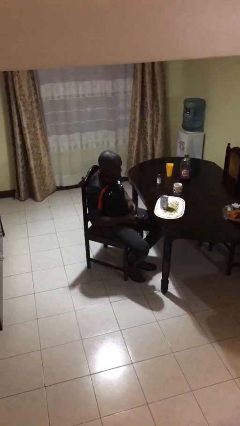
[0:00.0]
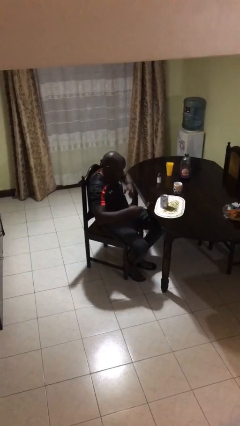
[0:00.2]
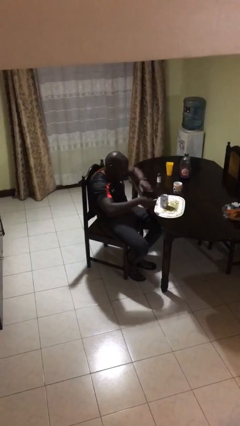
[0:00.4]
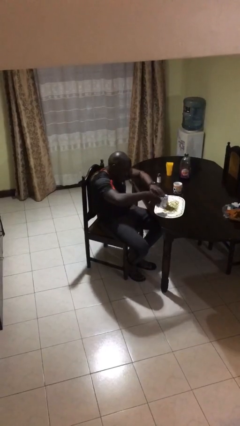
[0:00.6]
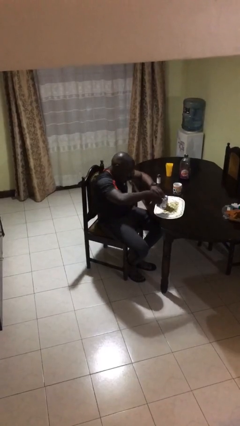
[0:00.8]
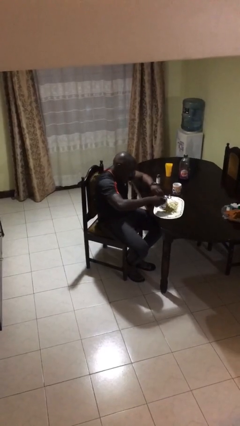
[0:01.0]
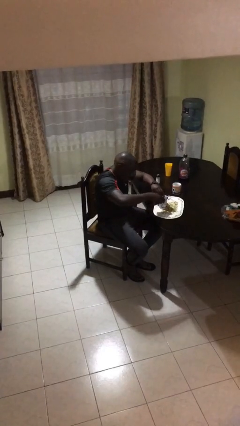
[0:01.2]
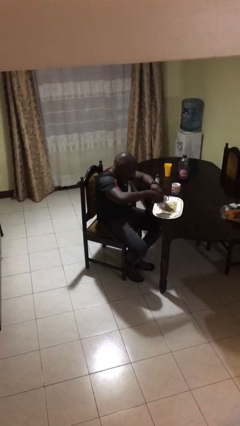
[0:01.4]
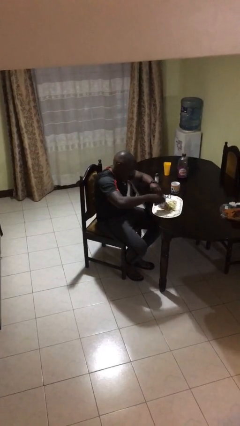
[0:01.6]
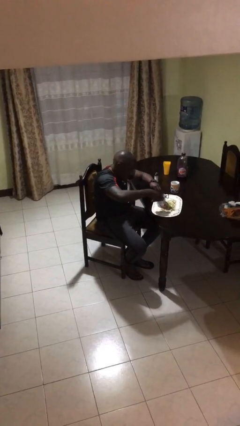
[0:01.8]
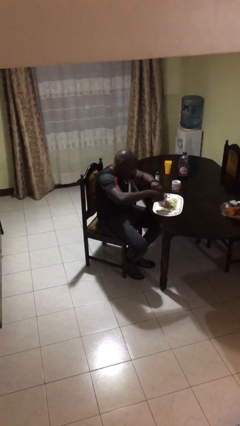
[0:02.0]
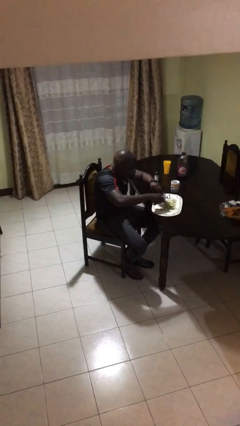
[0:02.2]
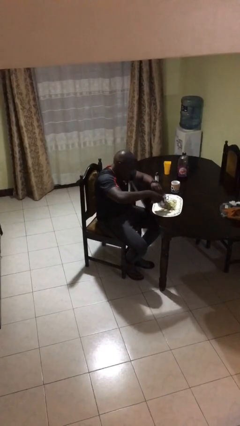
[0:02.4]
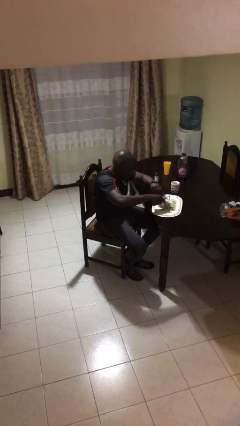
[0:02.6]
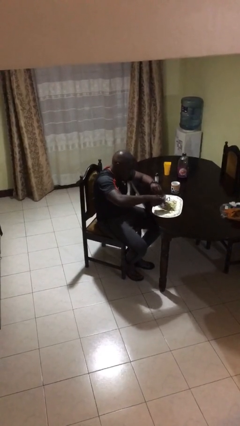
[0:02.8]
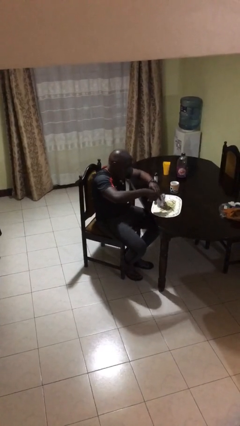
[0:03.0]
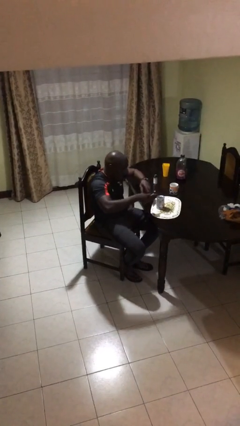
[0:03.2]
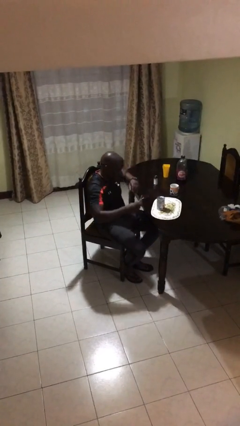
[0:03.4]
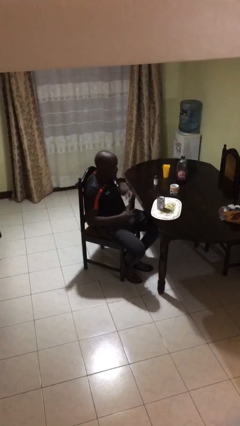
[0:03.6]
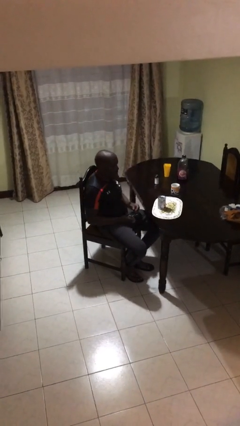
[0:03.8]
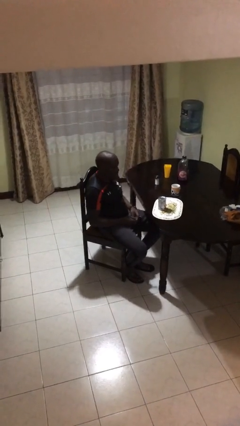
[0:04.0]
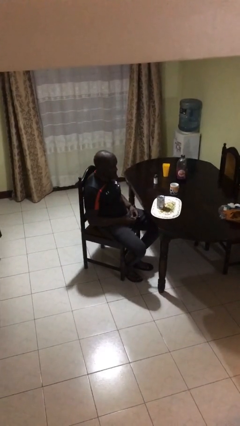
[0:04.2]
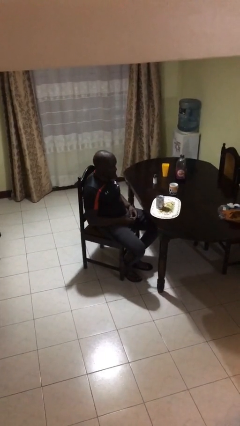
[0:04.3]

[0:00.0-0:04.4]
person opens can with can opener

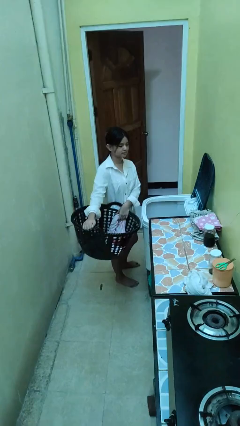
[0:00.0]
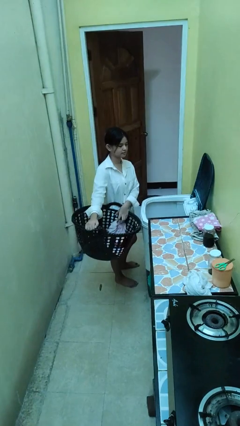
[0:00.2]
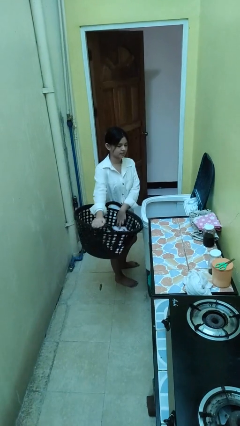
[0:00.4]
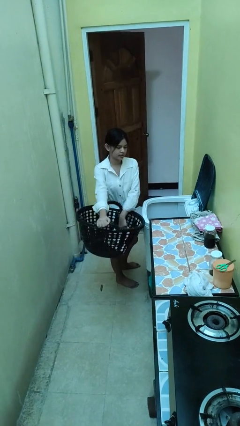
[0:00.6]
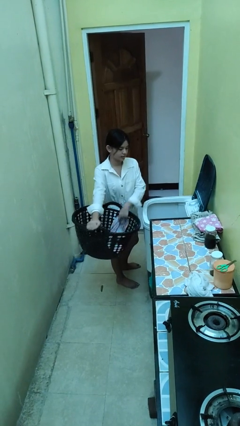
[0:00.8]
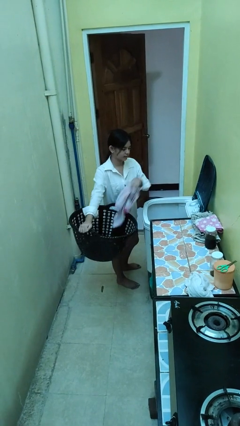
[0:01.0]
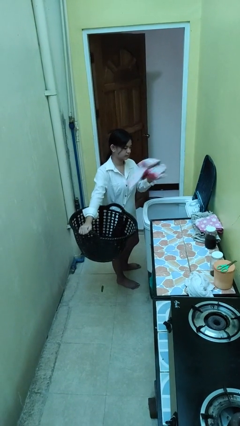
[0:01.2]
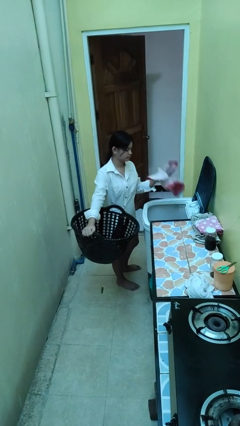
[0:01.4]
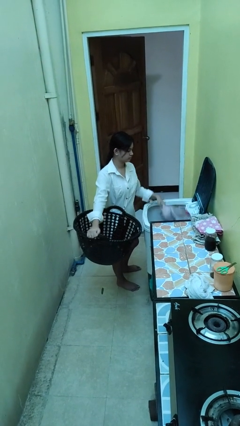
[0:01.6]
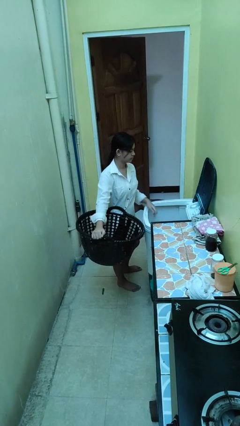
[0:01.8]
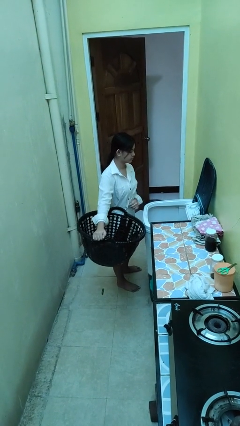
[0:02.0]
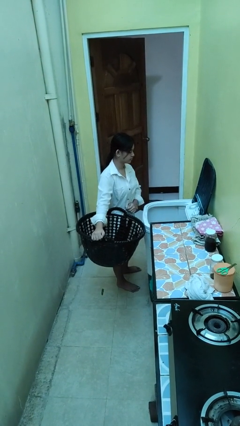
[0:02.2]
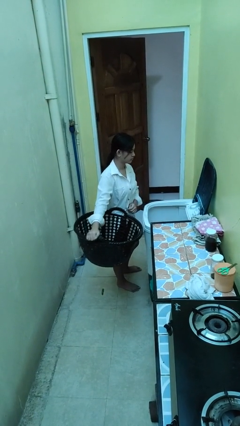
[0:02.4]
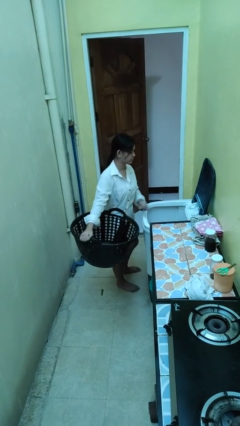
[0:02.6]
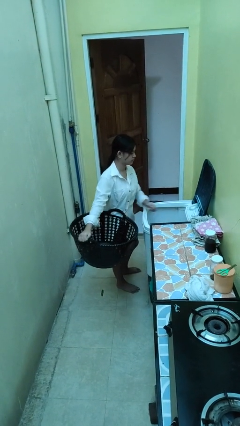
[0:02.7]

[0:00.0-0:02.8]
person loads clotheswasher

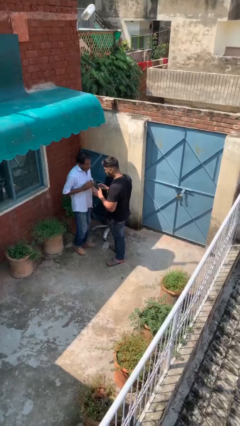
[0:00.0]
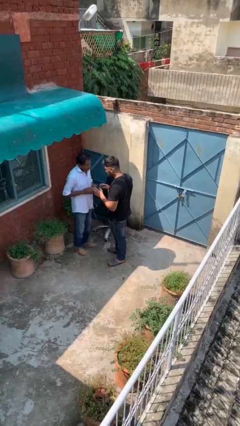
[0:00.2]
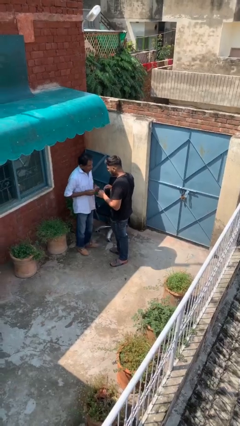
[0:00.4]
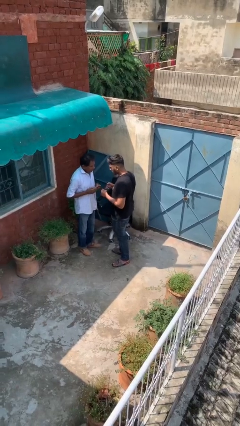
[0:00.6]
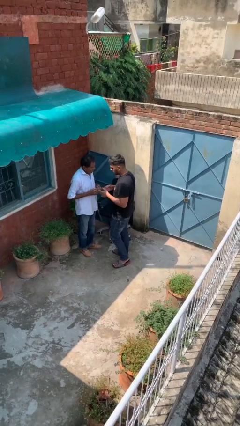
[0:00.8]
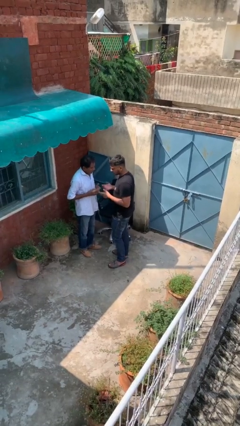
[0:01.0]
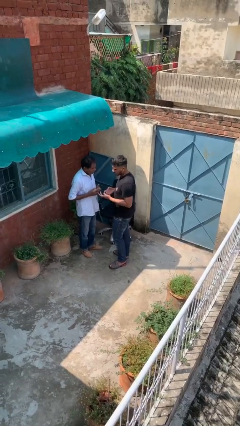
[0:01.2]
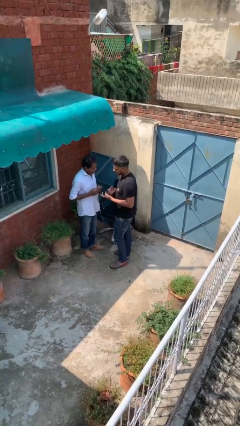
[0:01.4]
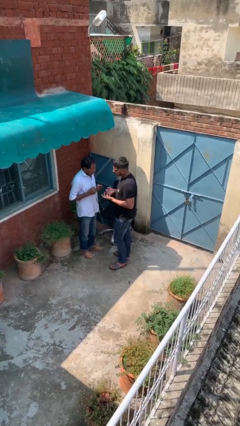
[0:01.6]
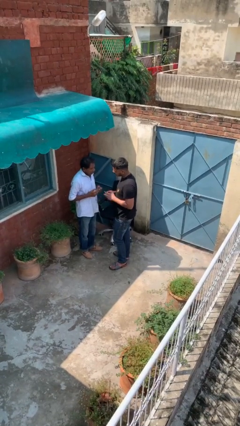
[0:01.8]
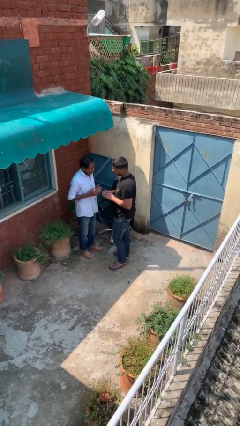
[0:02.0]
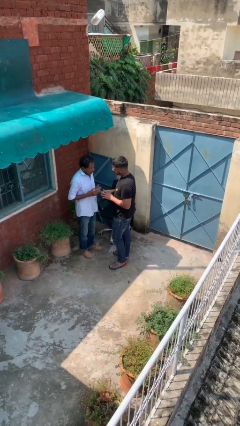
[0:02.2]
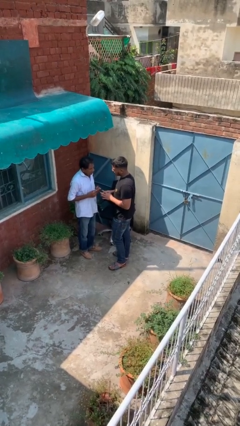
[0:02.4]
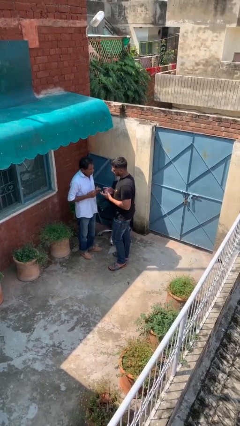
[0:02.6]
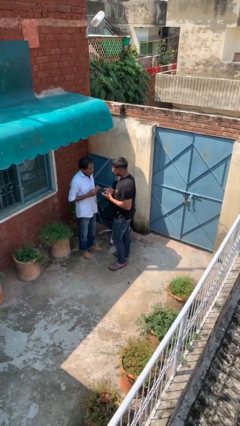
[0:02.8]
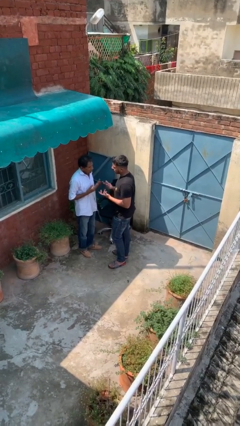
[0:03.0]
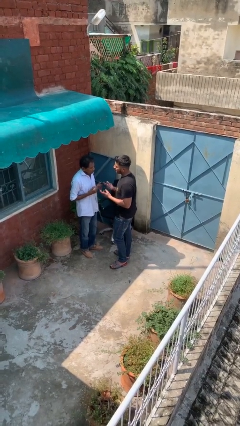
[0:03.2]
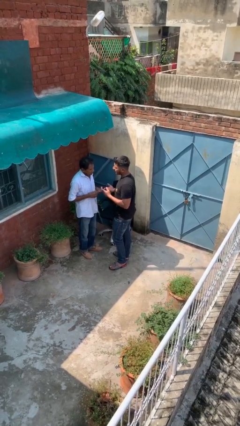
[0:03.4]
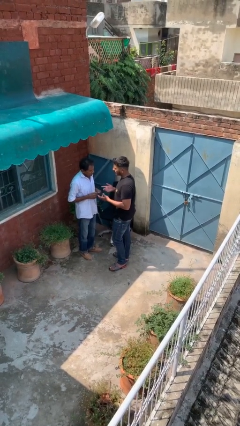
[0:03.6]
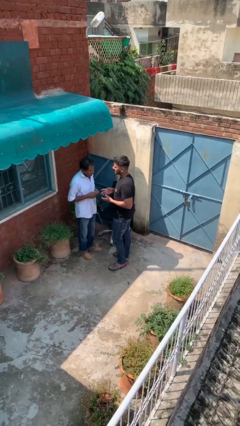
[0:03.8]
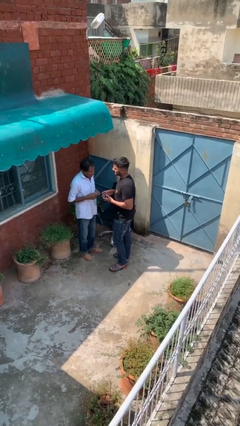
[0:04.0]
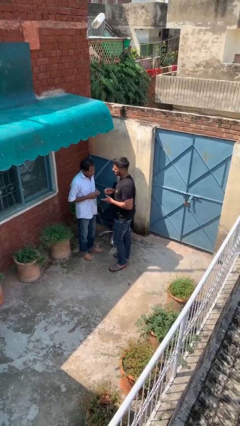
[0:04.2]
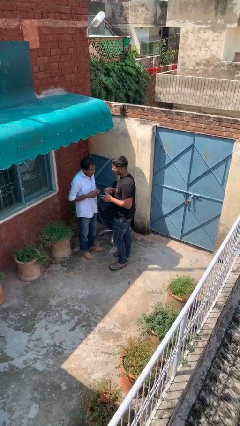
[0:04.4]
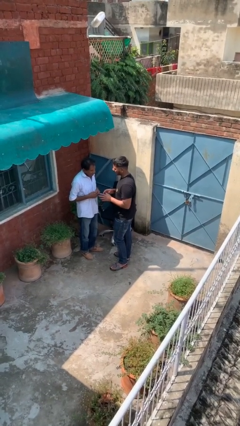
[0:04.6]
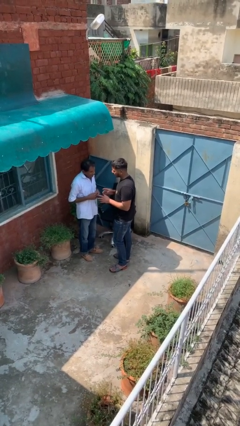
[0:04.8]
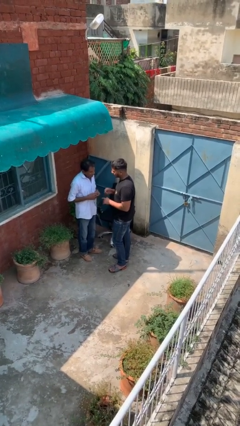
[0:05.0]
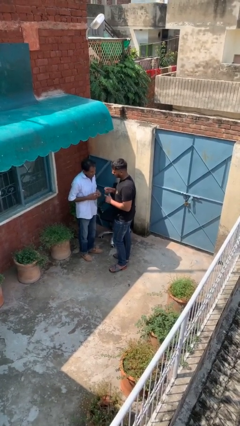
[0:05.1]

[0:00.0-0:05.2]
person talks to person

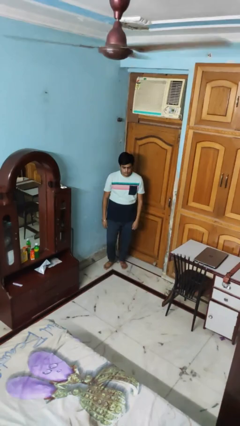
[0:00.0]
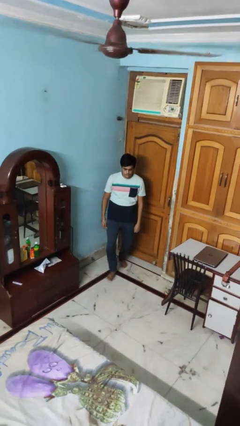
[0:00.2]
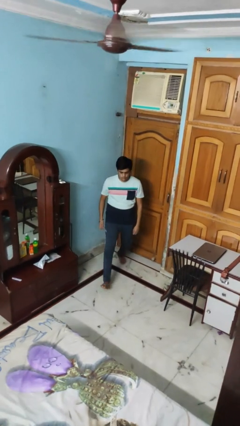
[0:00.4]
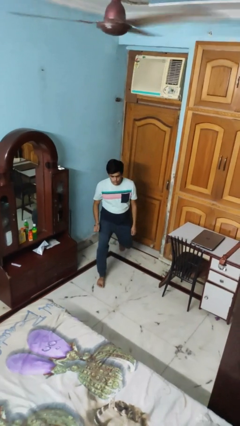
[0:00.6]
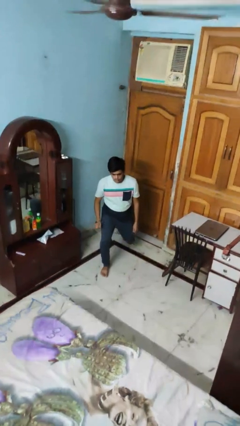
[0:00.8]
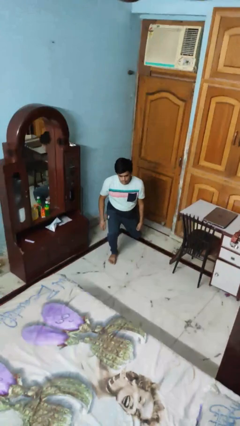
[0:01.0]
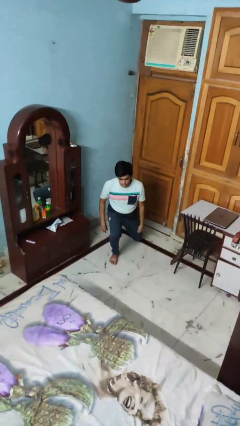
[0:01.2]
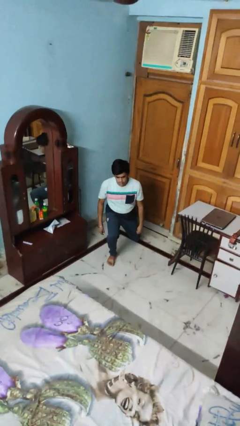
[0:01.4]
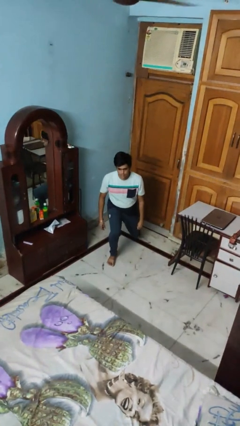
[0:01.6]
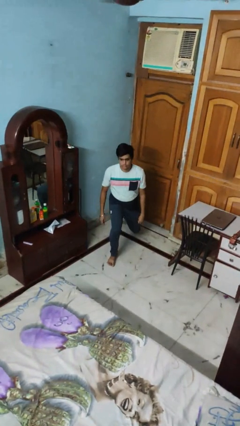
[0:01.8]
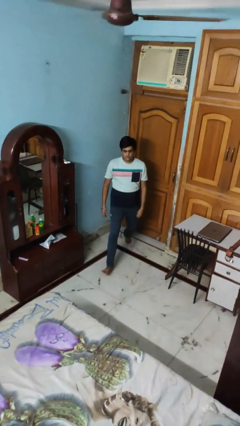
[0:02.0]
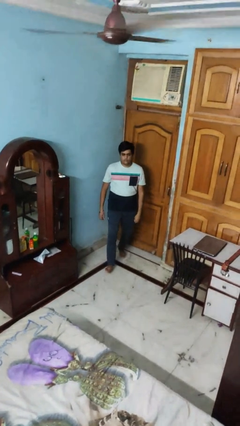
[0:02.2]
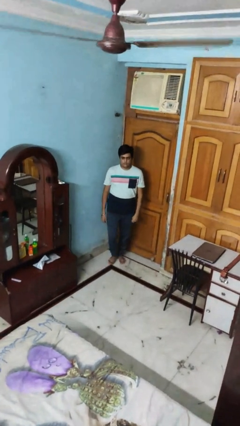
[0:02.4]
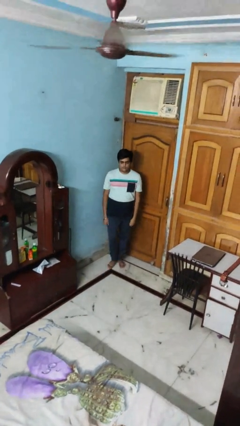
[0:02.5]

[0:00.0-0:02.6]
person exercises with lunges

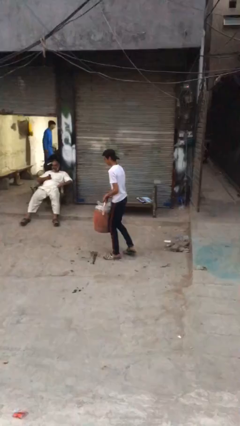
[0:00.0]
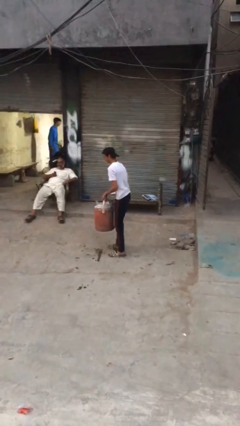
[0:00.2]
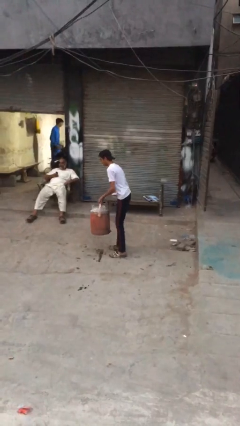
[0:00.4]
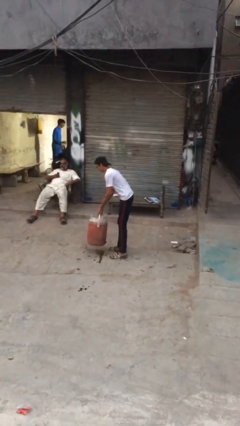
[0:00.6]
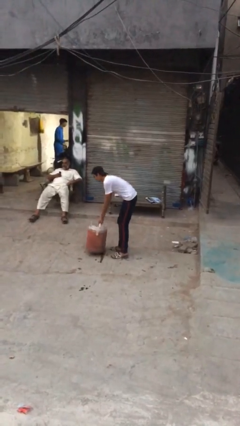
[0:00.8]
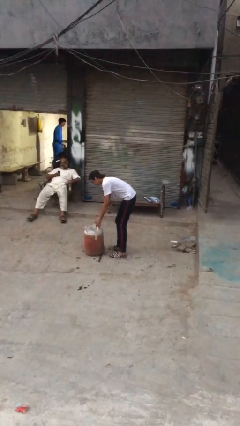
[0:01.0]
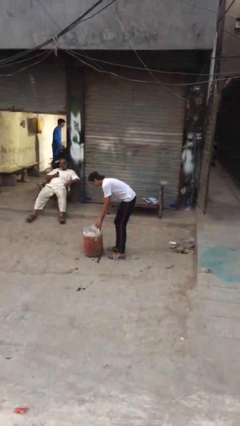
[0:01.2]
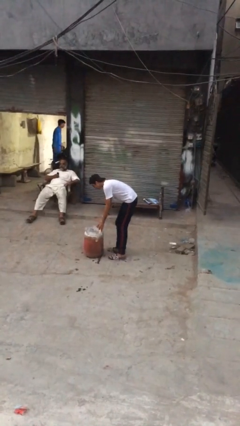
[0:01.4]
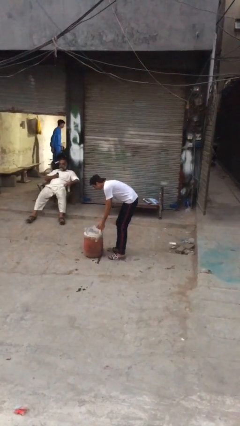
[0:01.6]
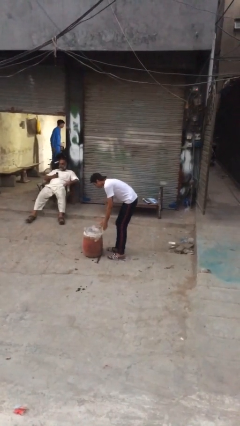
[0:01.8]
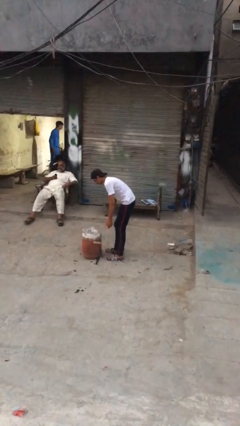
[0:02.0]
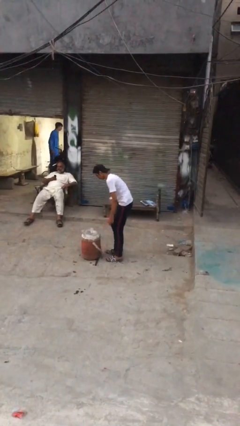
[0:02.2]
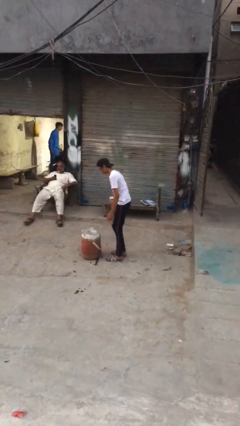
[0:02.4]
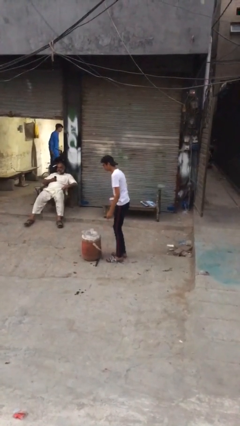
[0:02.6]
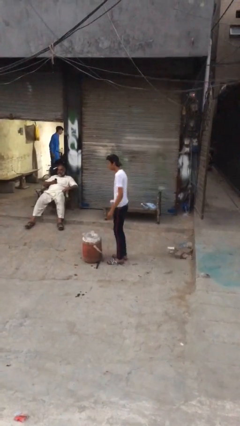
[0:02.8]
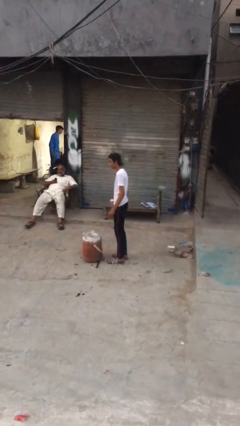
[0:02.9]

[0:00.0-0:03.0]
person puts down object on floor
